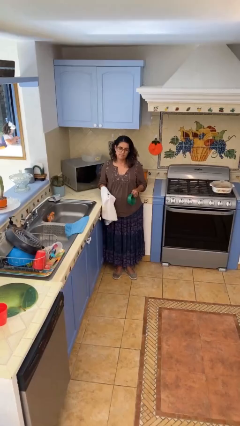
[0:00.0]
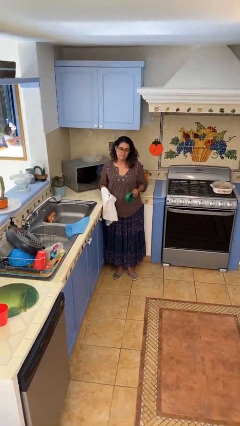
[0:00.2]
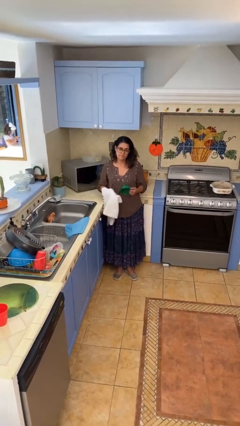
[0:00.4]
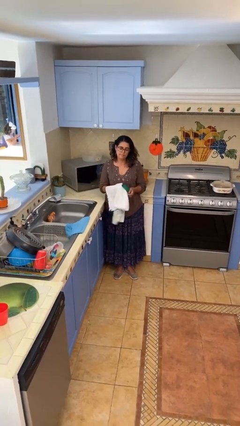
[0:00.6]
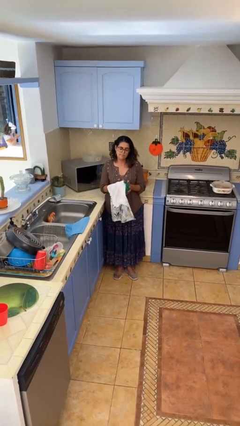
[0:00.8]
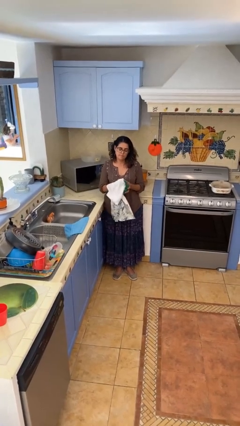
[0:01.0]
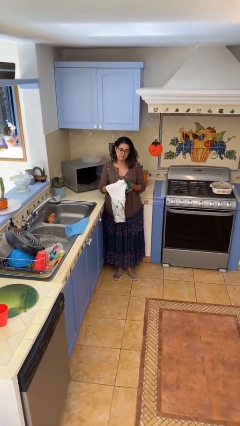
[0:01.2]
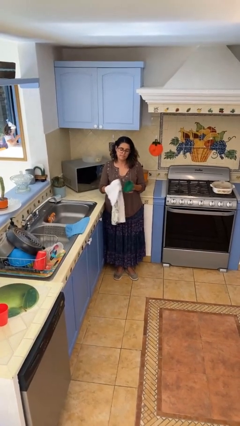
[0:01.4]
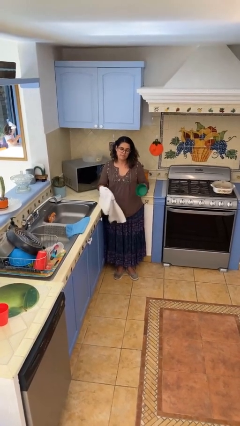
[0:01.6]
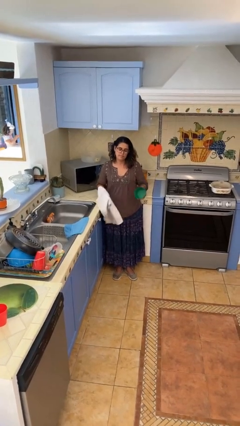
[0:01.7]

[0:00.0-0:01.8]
person dries dish

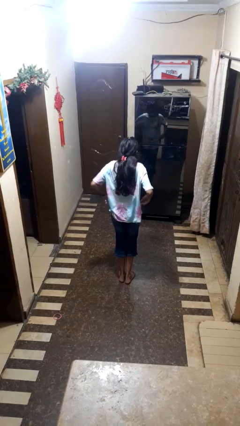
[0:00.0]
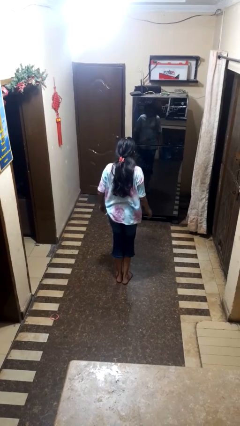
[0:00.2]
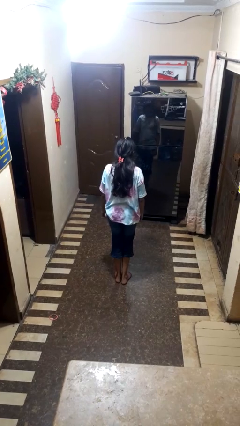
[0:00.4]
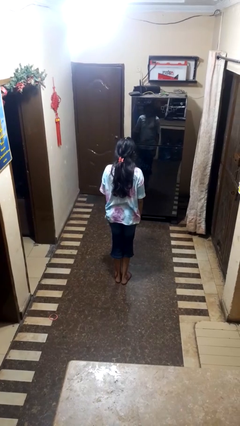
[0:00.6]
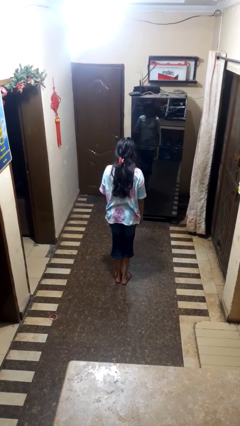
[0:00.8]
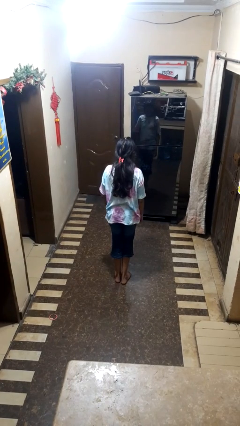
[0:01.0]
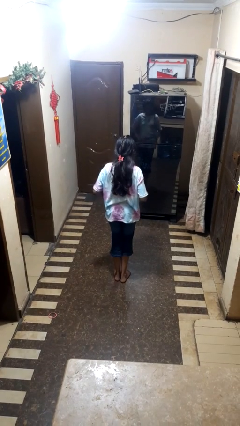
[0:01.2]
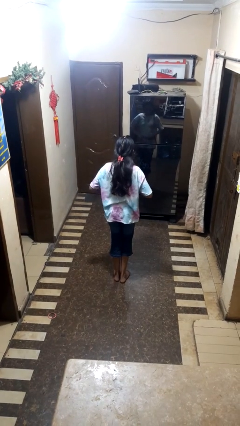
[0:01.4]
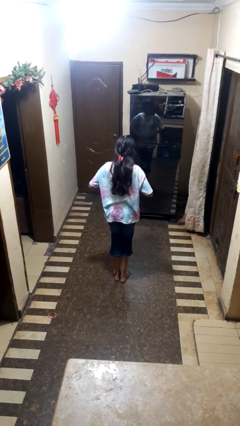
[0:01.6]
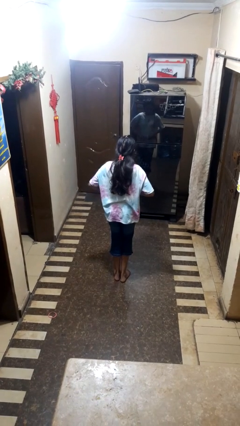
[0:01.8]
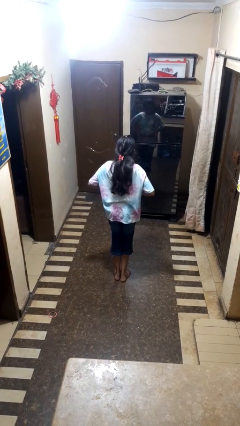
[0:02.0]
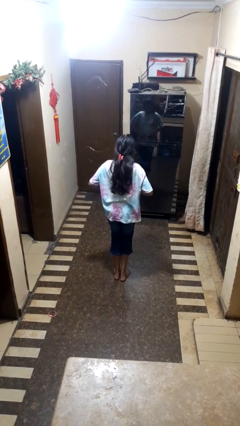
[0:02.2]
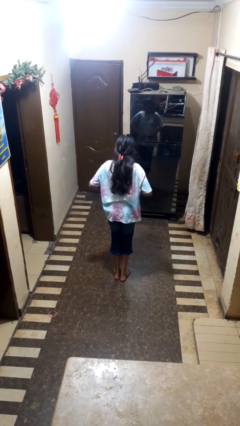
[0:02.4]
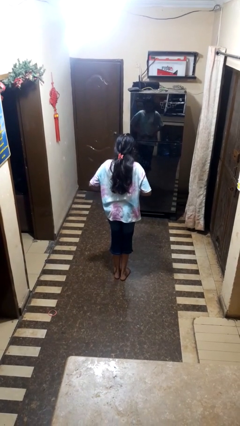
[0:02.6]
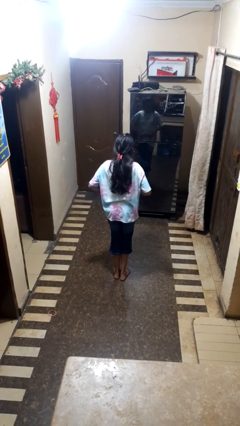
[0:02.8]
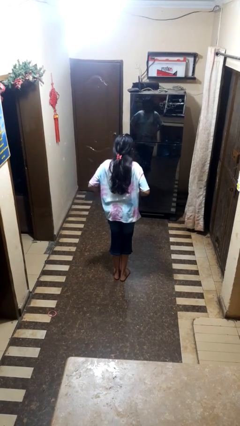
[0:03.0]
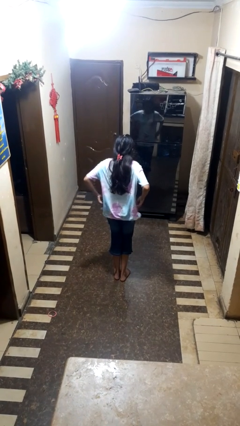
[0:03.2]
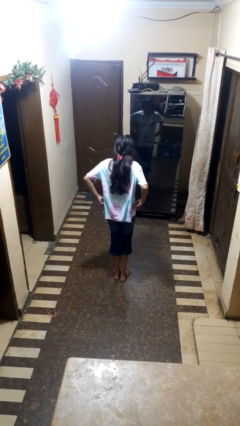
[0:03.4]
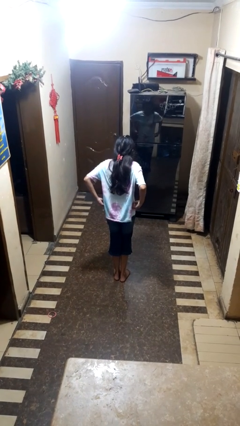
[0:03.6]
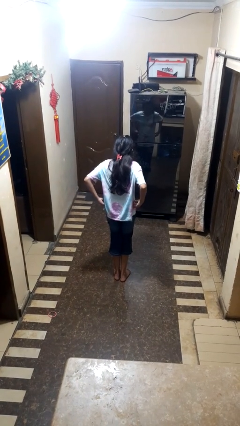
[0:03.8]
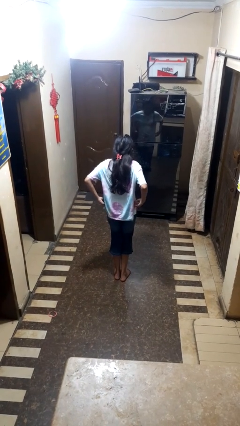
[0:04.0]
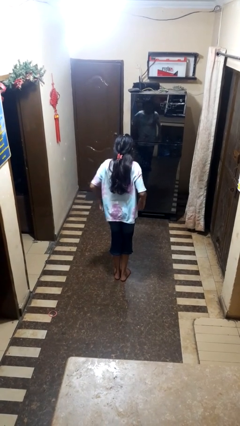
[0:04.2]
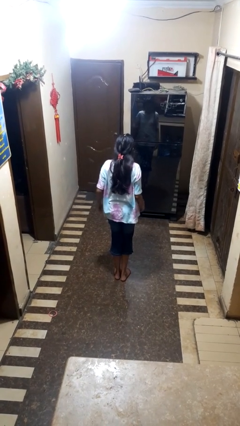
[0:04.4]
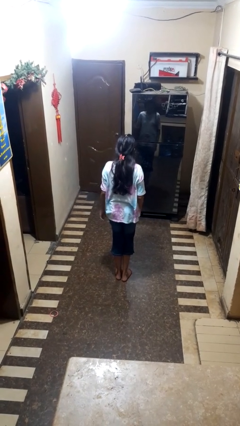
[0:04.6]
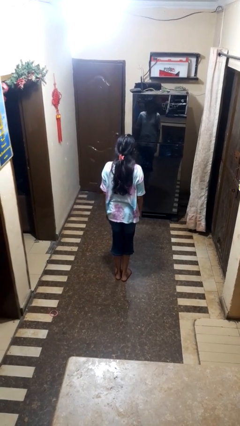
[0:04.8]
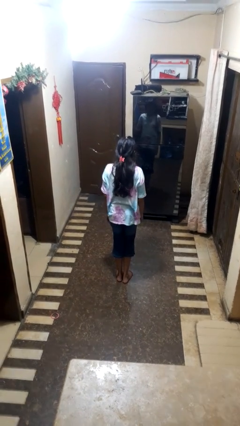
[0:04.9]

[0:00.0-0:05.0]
person hikes up pants

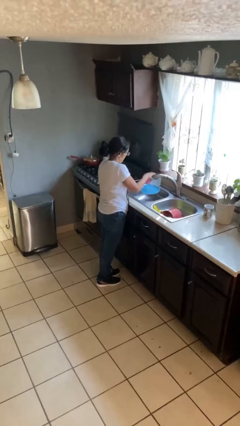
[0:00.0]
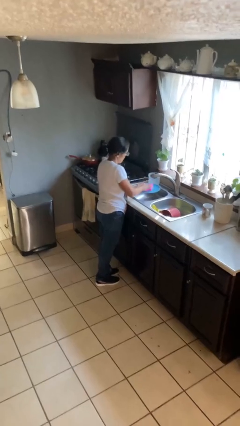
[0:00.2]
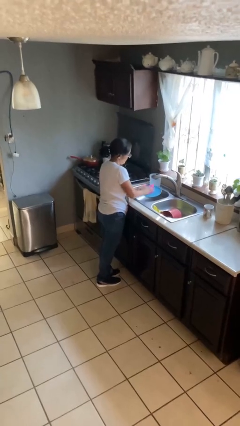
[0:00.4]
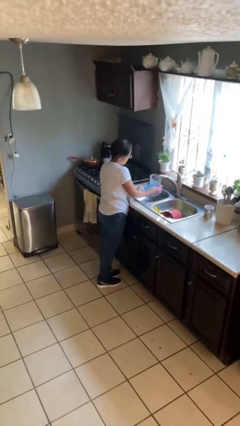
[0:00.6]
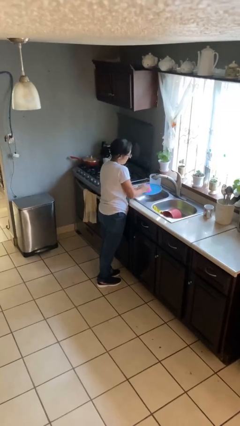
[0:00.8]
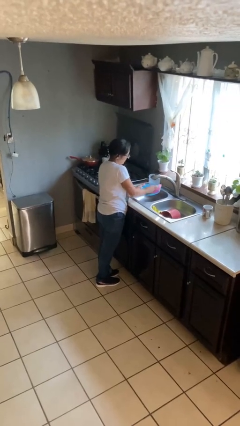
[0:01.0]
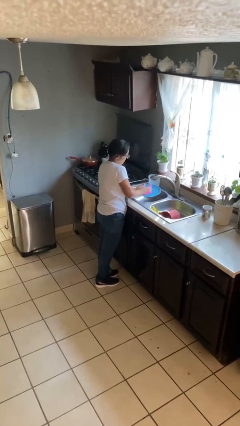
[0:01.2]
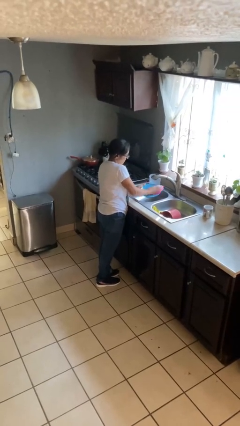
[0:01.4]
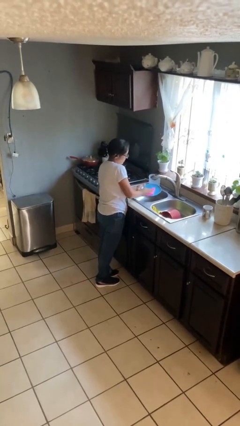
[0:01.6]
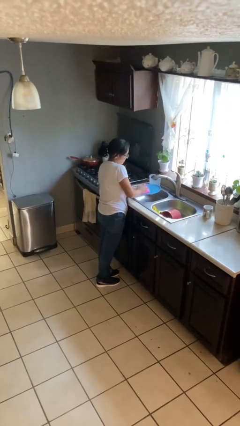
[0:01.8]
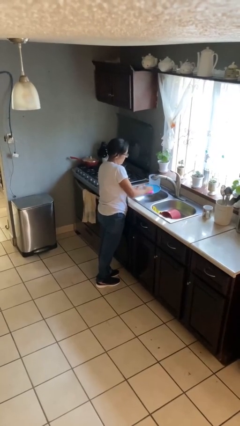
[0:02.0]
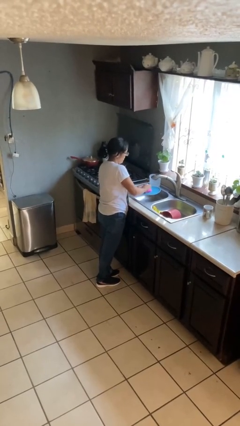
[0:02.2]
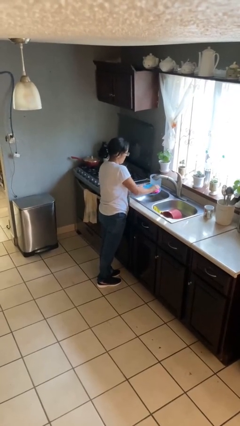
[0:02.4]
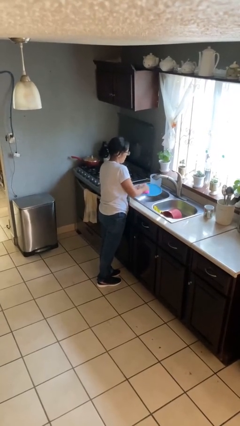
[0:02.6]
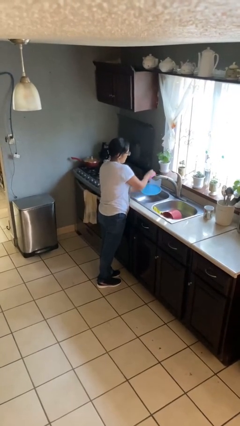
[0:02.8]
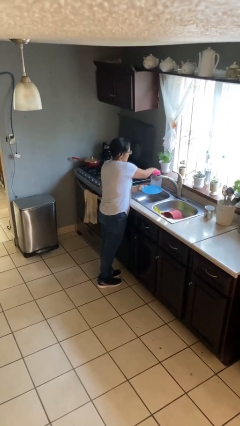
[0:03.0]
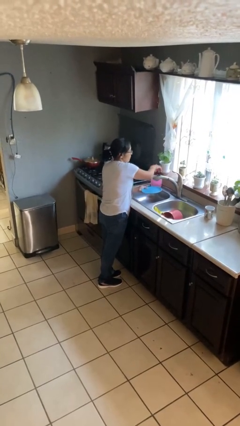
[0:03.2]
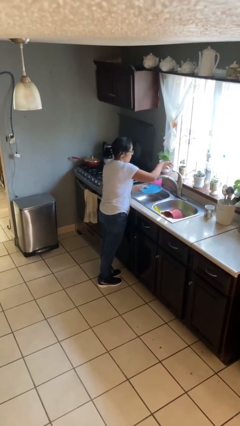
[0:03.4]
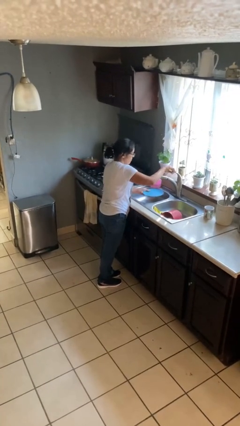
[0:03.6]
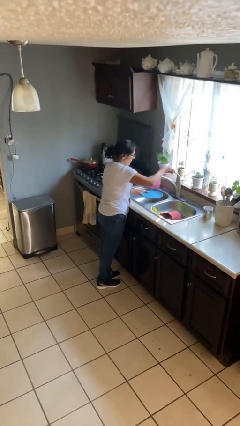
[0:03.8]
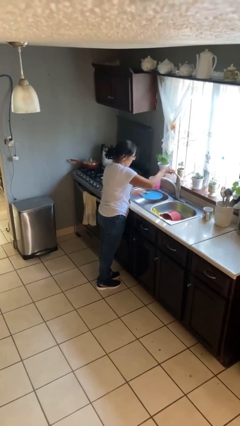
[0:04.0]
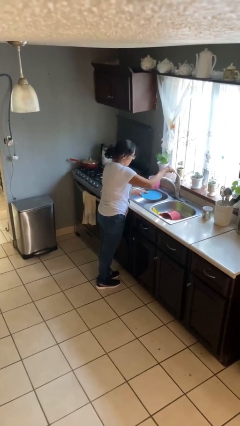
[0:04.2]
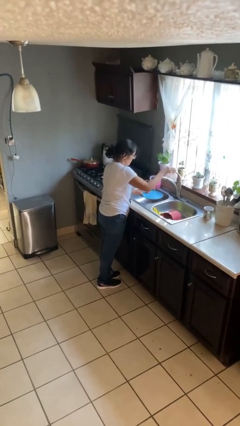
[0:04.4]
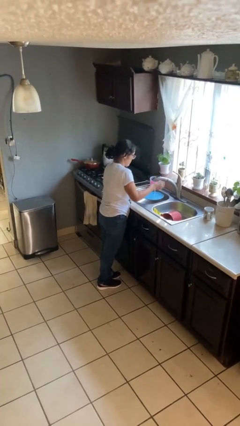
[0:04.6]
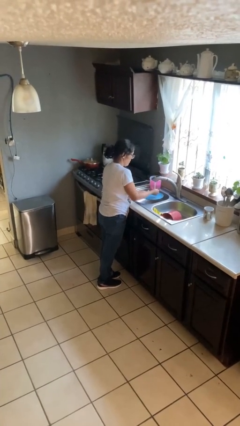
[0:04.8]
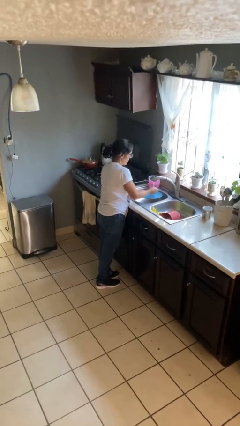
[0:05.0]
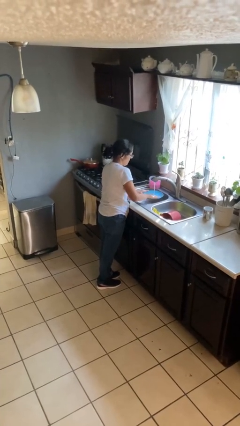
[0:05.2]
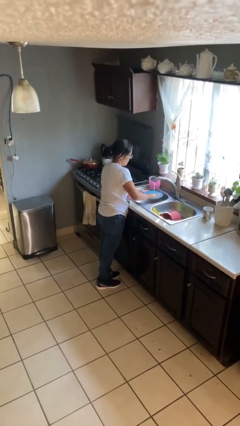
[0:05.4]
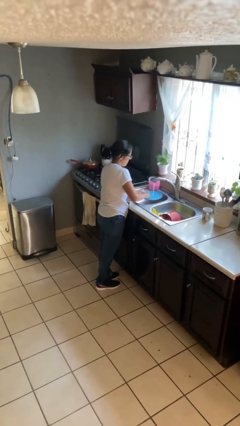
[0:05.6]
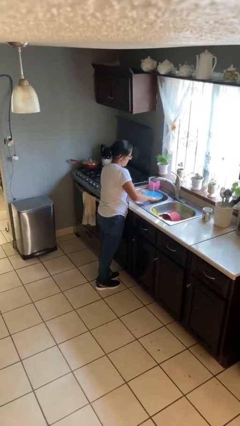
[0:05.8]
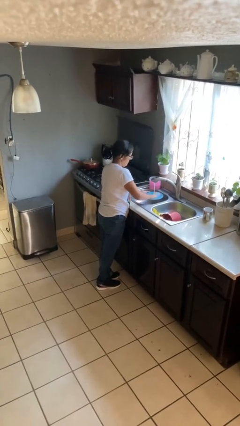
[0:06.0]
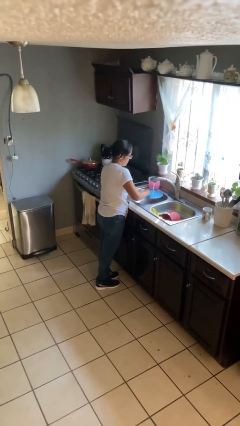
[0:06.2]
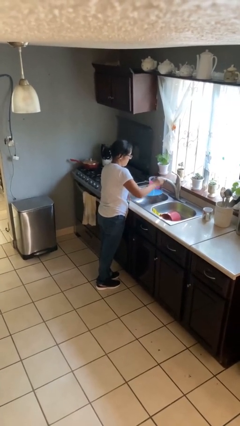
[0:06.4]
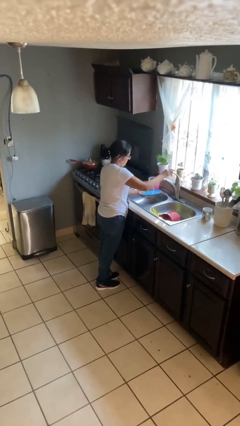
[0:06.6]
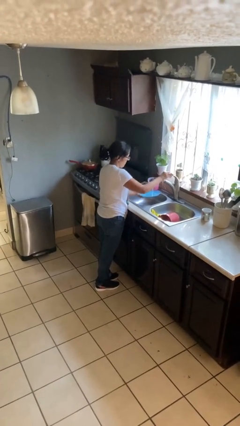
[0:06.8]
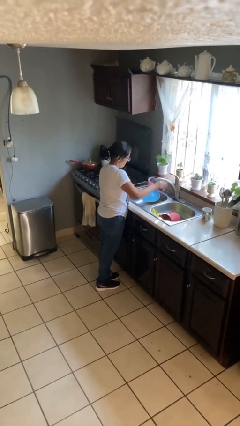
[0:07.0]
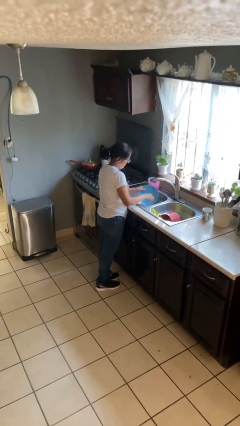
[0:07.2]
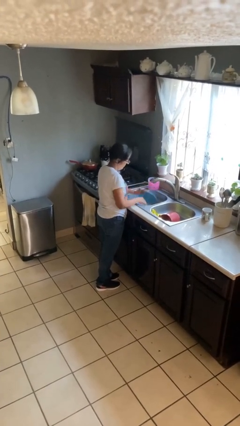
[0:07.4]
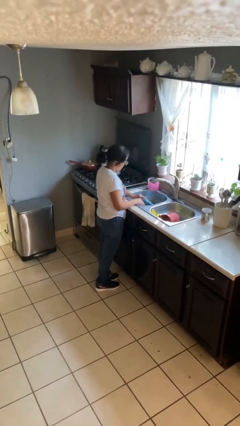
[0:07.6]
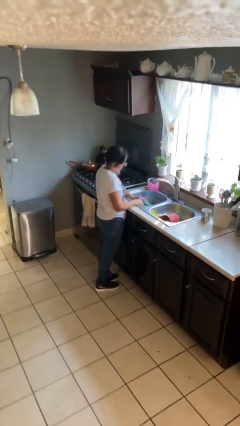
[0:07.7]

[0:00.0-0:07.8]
person washes dish

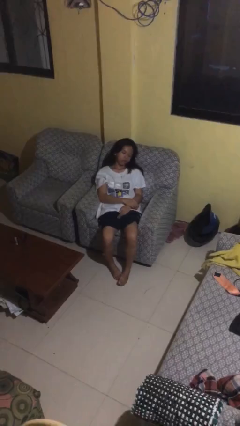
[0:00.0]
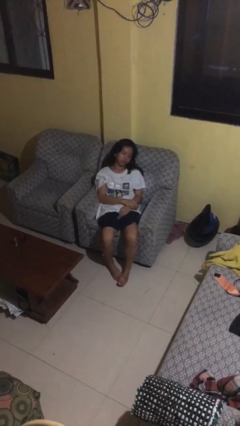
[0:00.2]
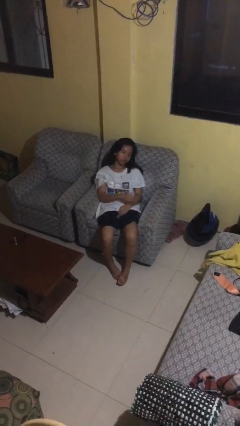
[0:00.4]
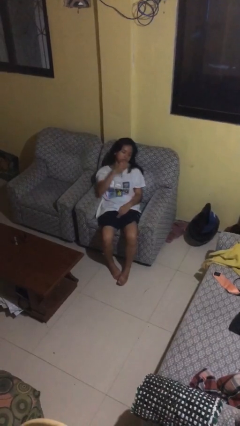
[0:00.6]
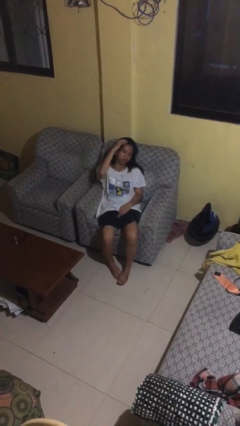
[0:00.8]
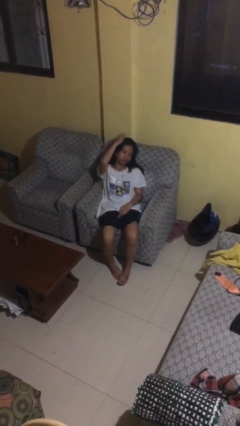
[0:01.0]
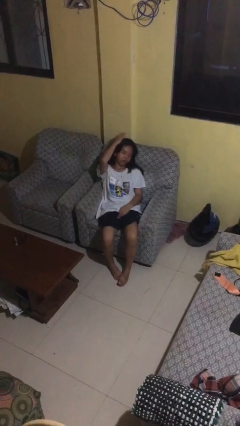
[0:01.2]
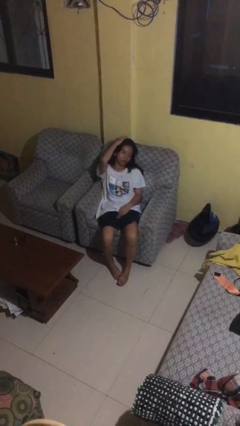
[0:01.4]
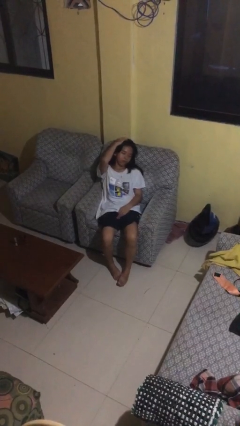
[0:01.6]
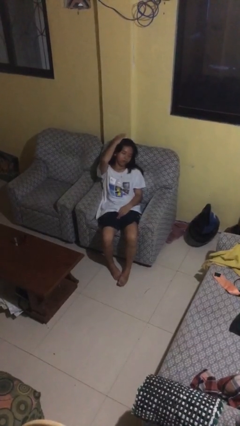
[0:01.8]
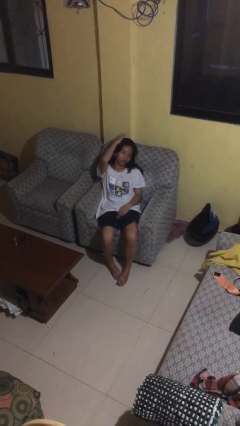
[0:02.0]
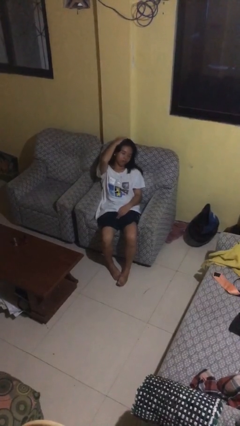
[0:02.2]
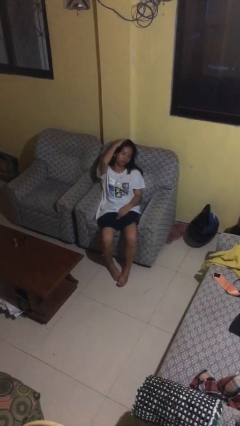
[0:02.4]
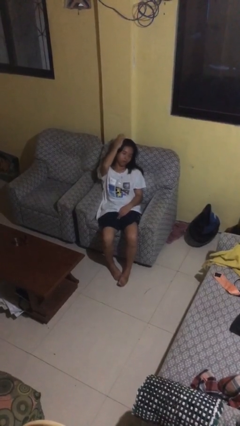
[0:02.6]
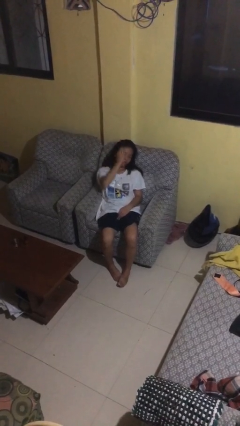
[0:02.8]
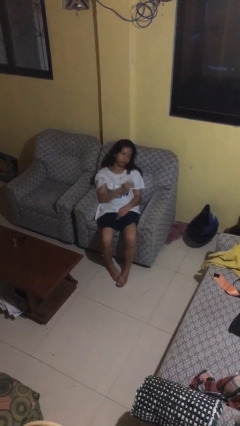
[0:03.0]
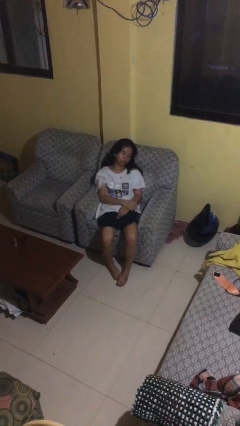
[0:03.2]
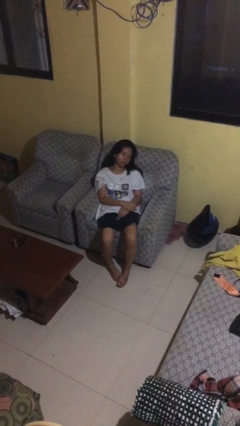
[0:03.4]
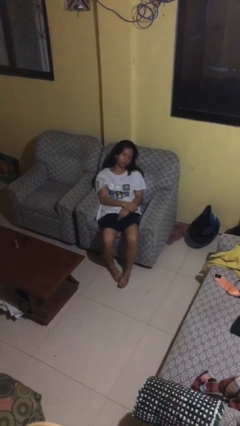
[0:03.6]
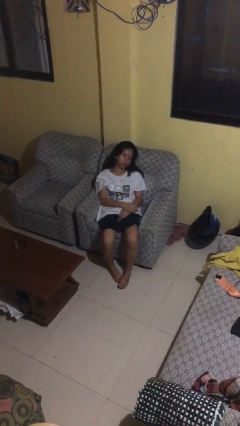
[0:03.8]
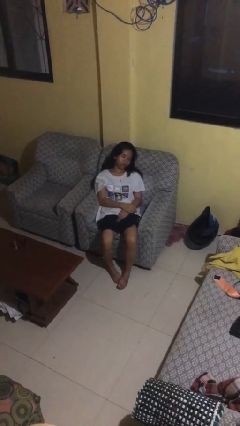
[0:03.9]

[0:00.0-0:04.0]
person pats head
